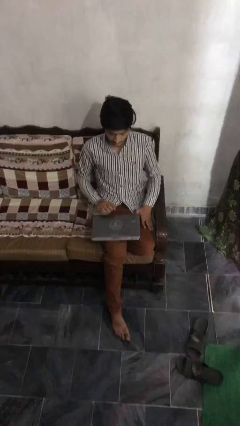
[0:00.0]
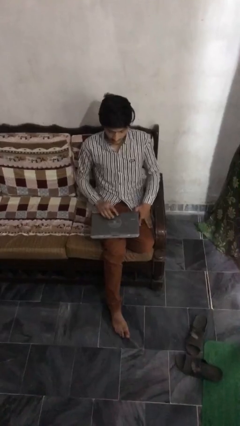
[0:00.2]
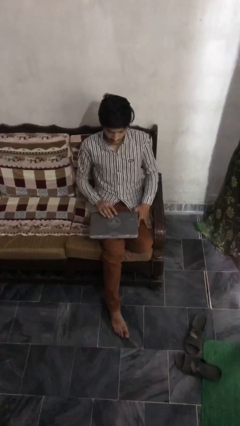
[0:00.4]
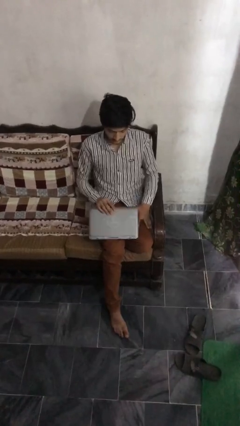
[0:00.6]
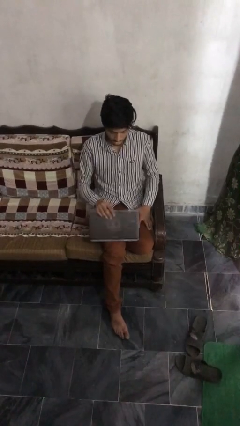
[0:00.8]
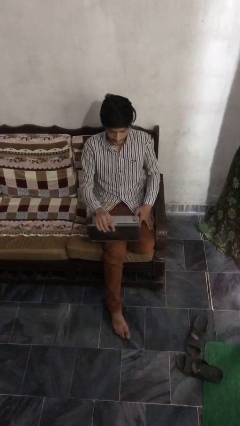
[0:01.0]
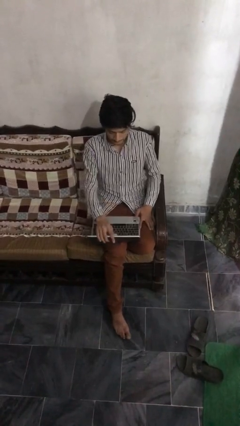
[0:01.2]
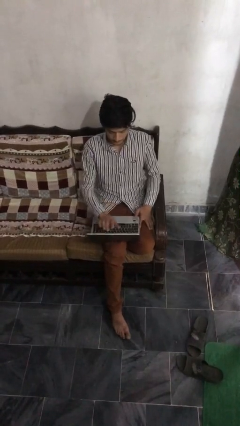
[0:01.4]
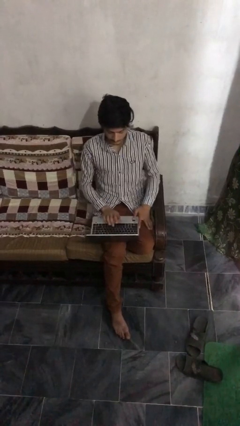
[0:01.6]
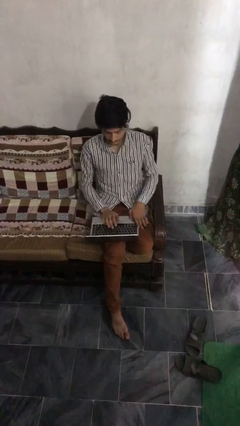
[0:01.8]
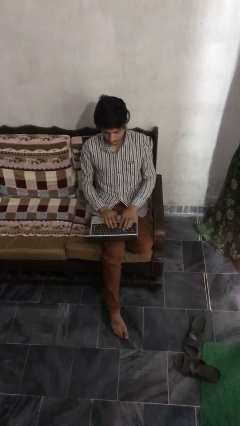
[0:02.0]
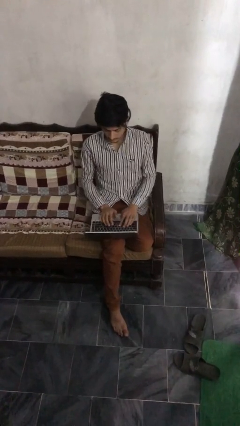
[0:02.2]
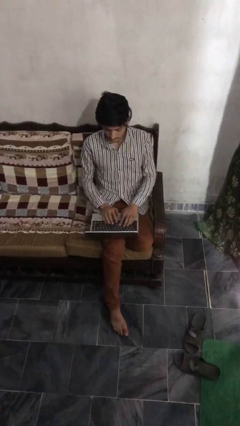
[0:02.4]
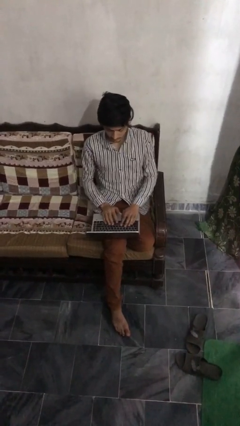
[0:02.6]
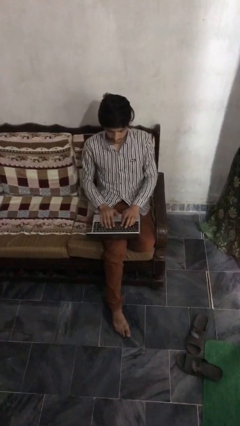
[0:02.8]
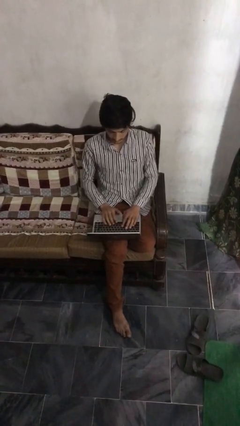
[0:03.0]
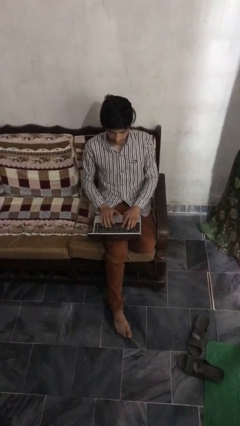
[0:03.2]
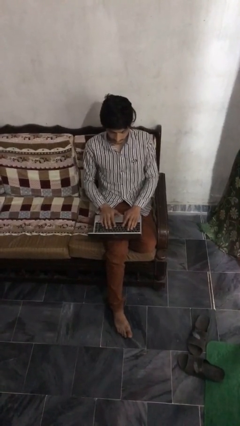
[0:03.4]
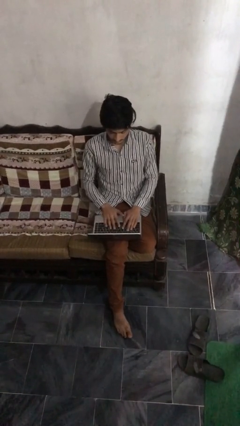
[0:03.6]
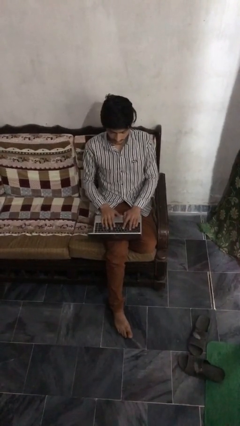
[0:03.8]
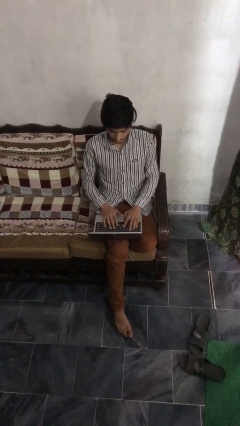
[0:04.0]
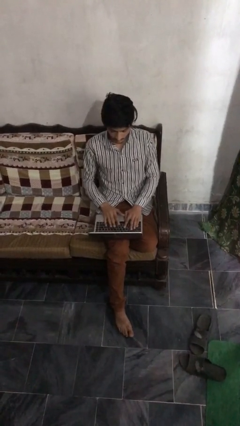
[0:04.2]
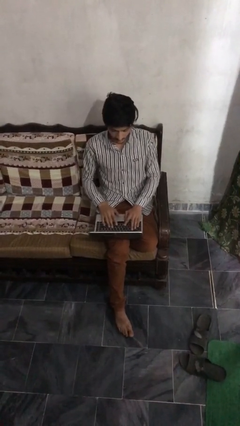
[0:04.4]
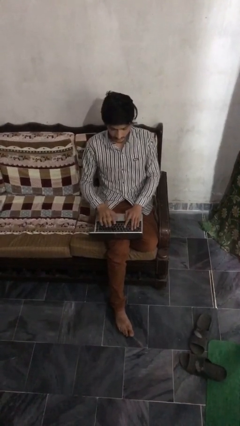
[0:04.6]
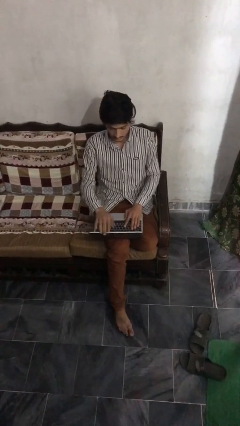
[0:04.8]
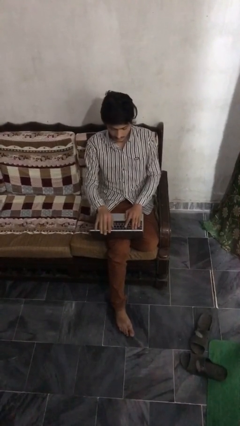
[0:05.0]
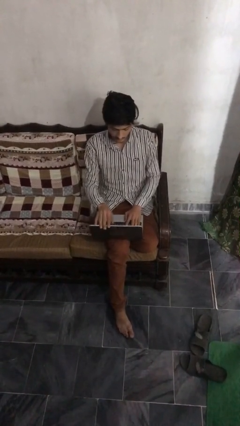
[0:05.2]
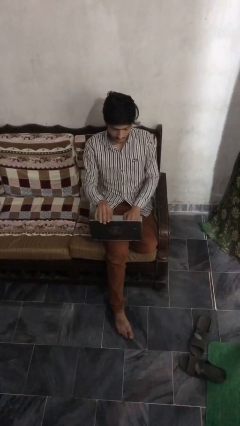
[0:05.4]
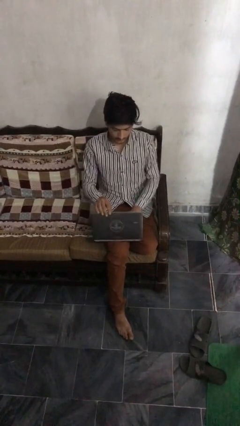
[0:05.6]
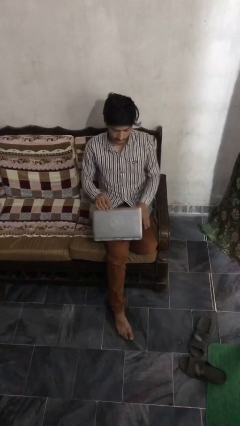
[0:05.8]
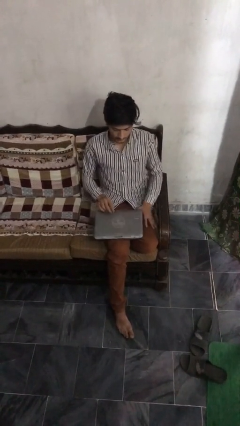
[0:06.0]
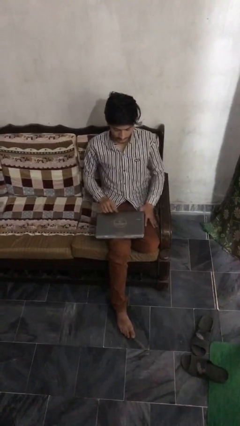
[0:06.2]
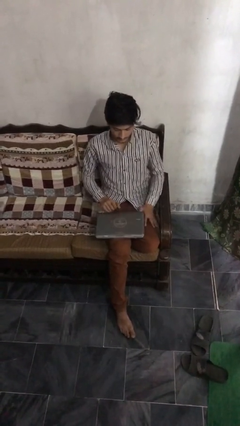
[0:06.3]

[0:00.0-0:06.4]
person interacts with laptop

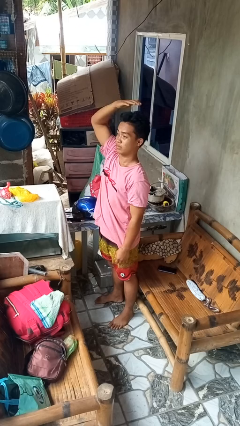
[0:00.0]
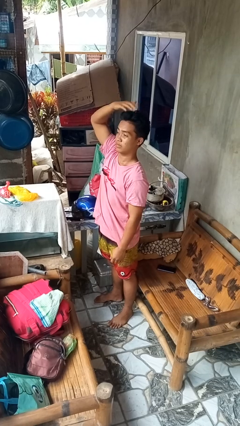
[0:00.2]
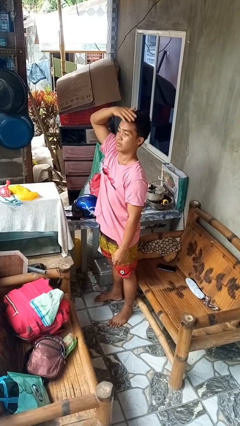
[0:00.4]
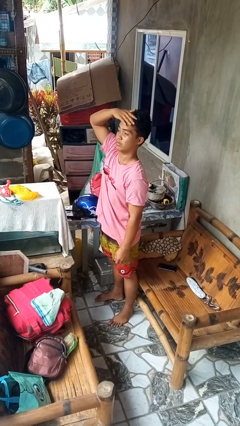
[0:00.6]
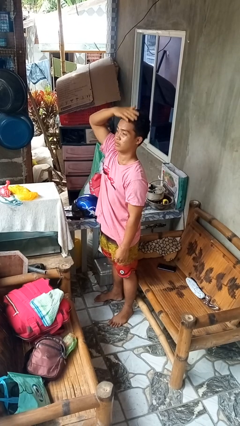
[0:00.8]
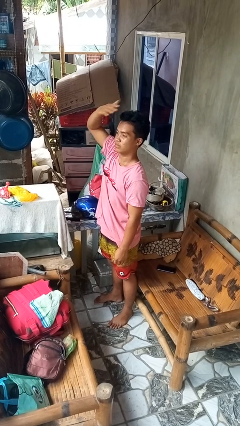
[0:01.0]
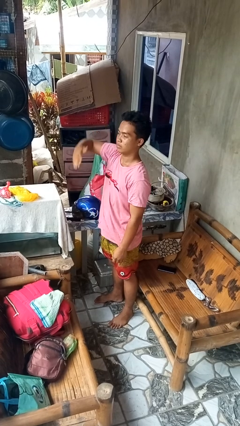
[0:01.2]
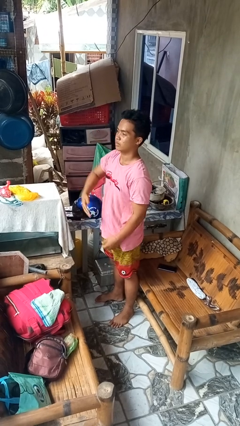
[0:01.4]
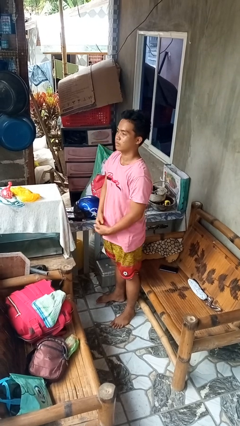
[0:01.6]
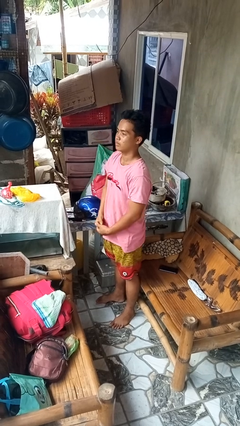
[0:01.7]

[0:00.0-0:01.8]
person pats head

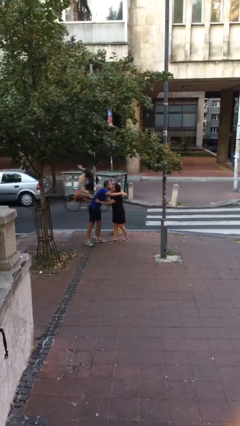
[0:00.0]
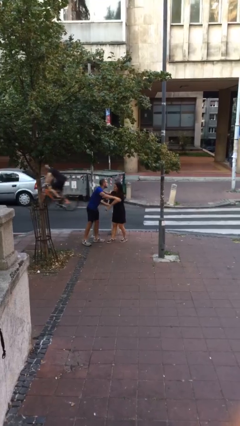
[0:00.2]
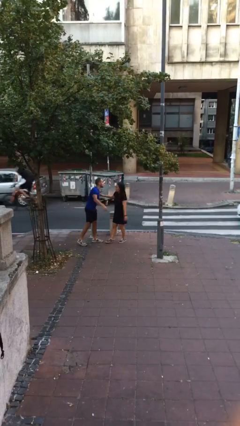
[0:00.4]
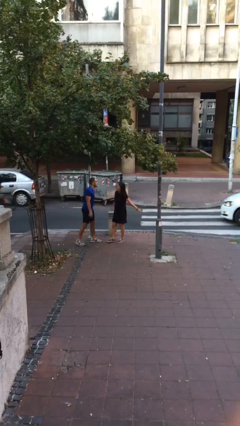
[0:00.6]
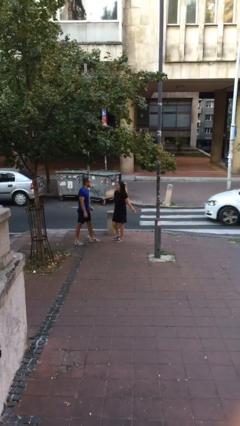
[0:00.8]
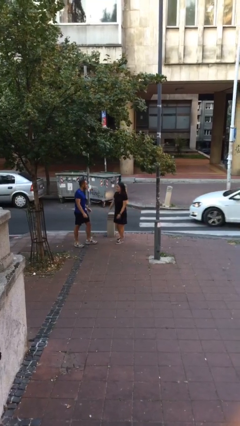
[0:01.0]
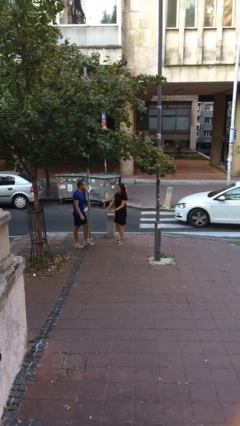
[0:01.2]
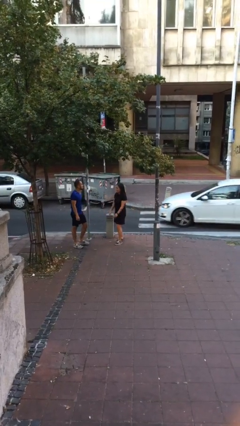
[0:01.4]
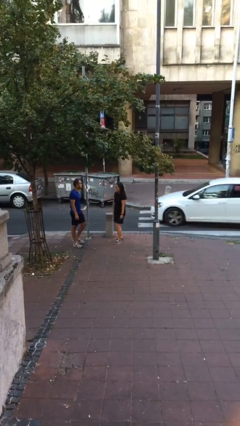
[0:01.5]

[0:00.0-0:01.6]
person talks to person

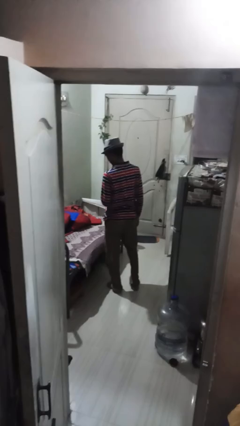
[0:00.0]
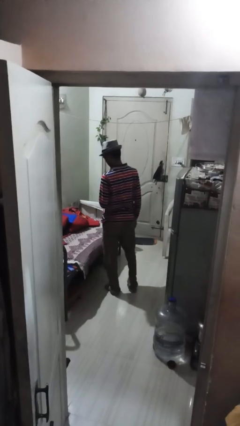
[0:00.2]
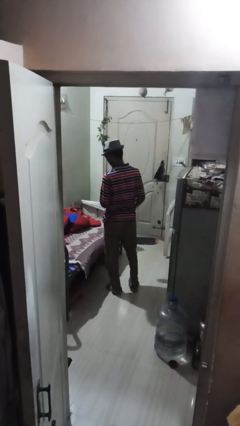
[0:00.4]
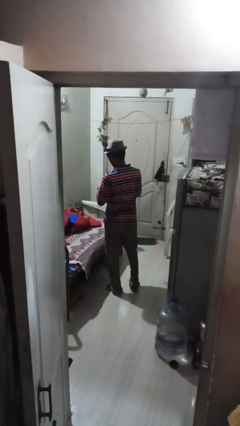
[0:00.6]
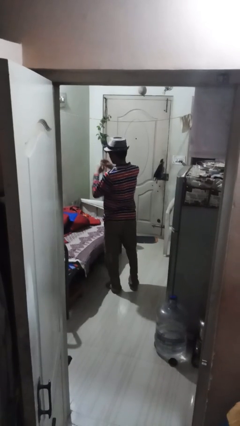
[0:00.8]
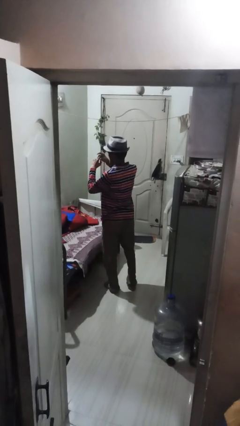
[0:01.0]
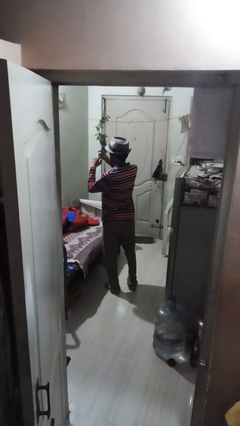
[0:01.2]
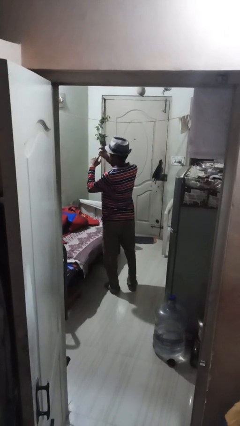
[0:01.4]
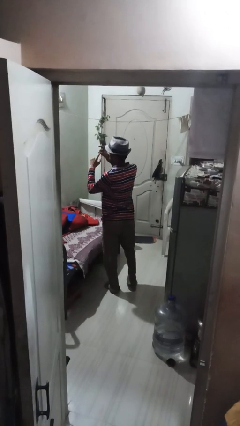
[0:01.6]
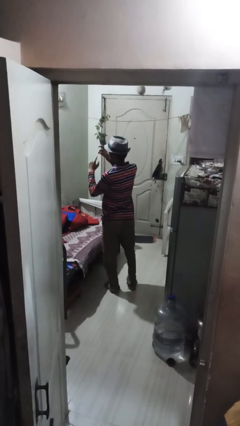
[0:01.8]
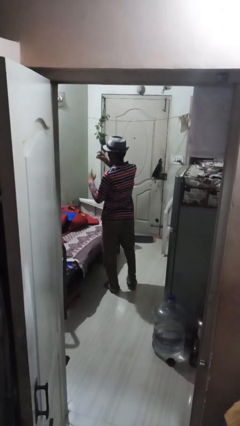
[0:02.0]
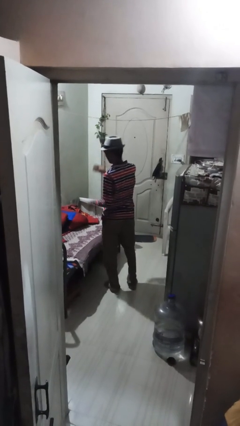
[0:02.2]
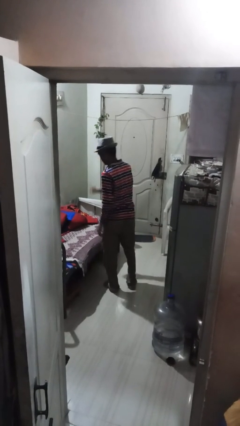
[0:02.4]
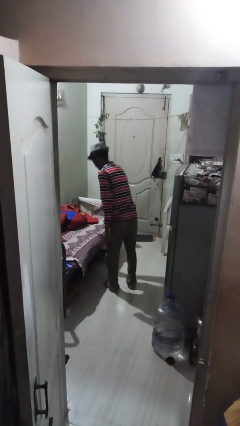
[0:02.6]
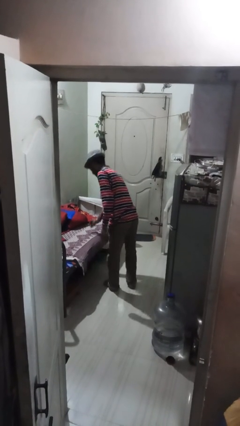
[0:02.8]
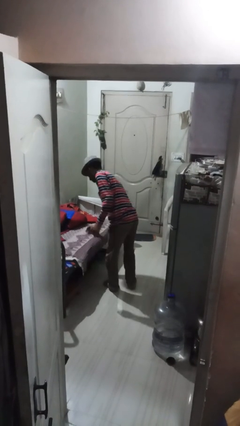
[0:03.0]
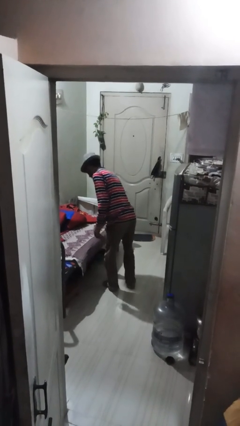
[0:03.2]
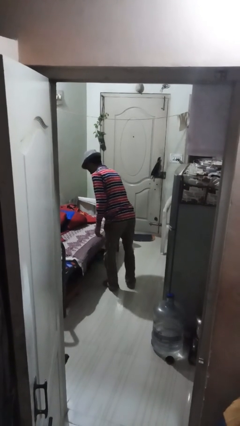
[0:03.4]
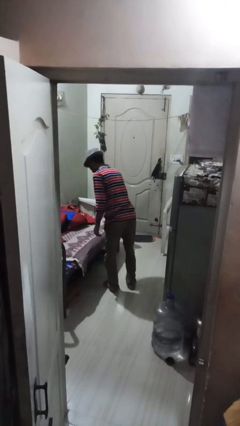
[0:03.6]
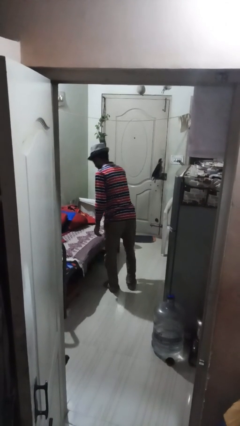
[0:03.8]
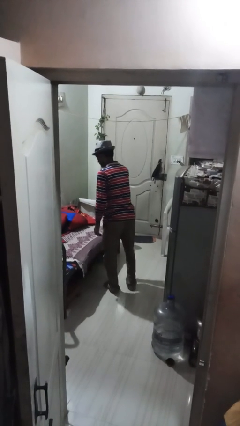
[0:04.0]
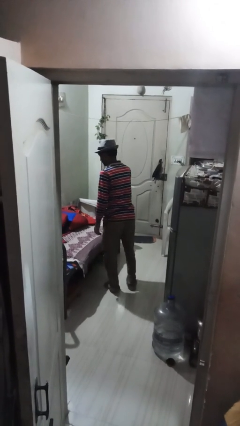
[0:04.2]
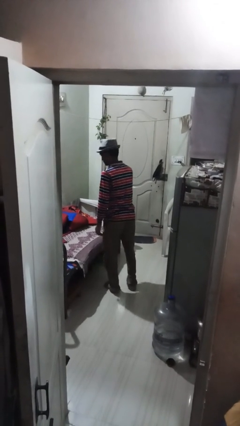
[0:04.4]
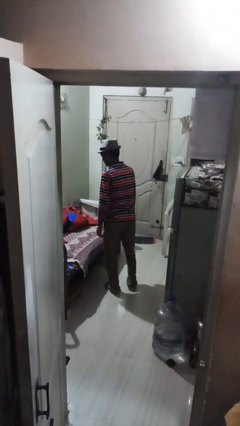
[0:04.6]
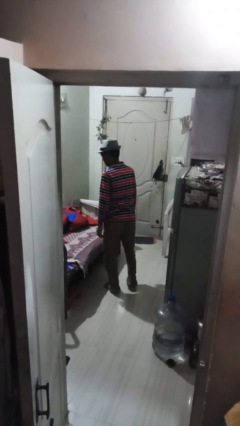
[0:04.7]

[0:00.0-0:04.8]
person takes off ring

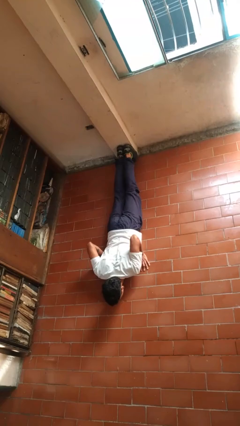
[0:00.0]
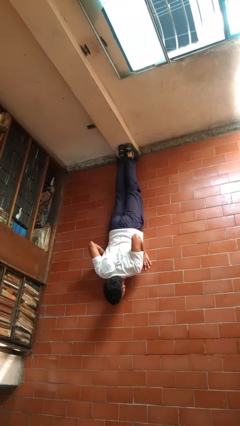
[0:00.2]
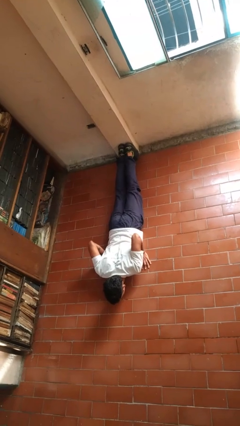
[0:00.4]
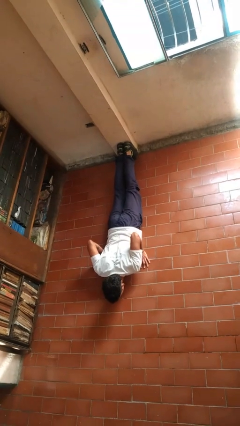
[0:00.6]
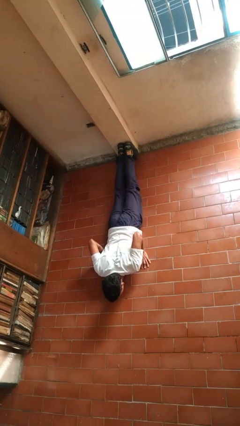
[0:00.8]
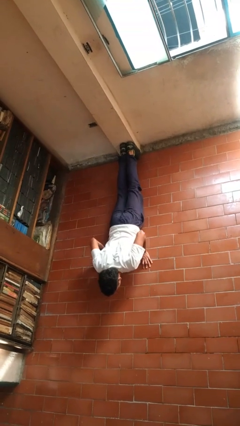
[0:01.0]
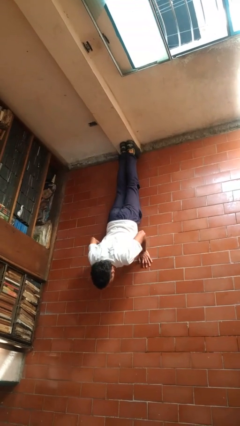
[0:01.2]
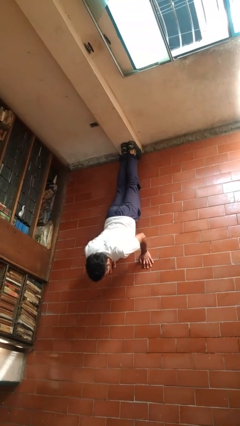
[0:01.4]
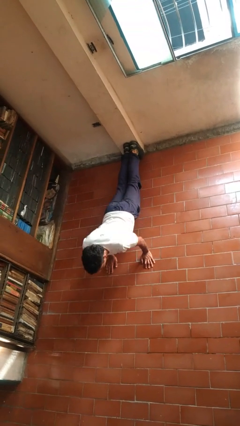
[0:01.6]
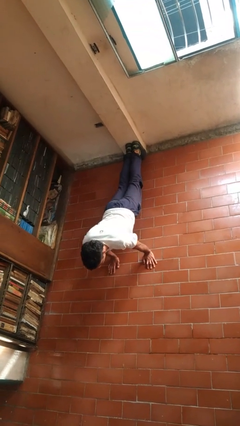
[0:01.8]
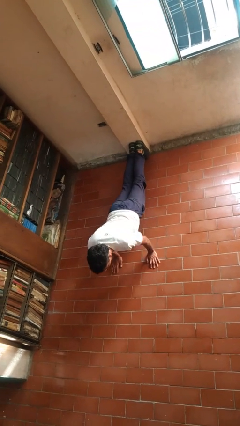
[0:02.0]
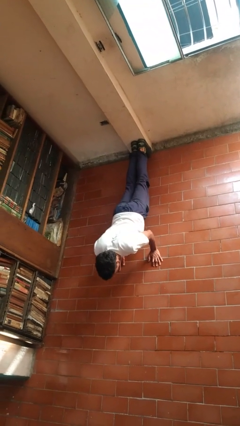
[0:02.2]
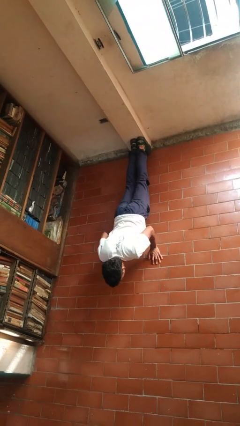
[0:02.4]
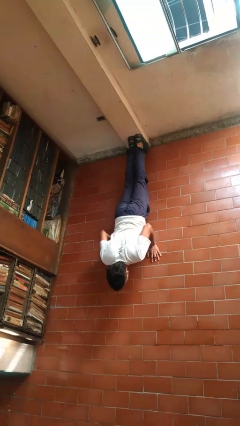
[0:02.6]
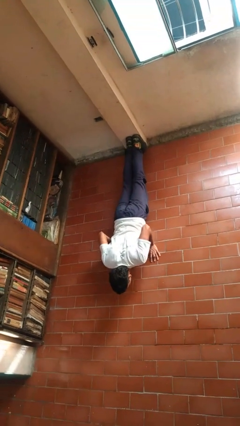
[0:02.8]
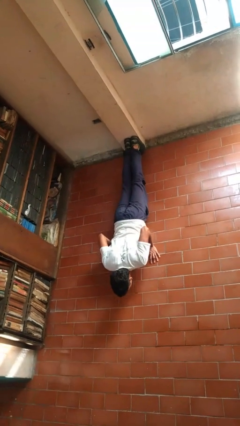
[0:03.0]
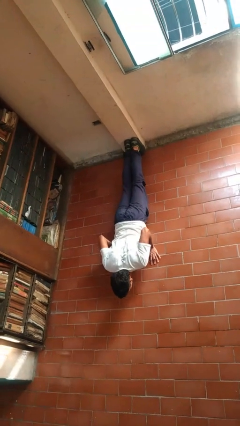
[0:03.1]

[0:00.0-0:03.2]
person exercises with pushup
